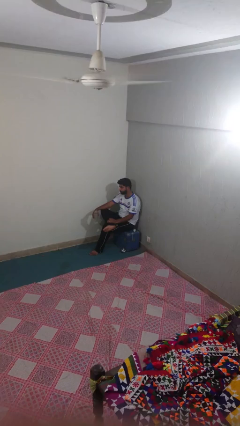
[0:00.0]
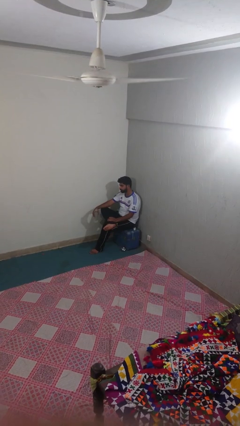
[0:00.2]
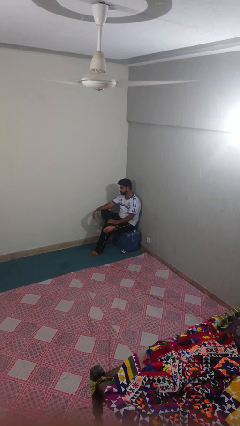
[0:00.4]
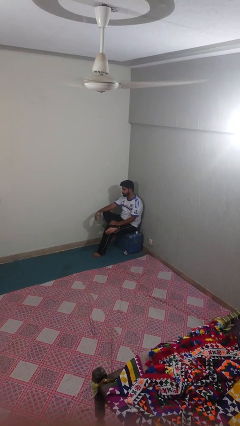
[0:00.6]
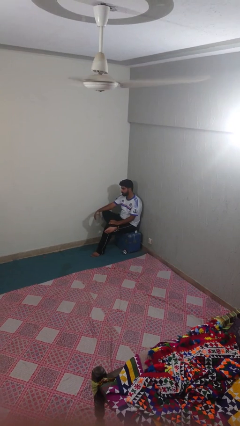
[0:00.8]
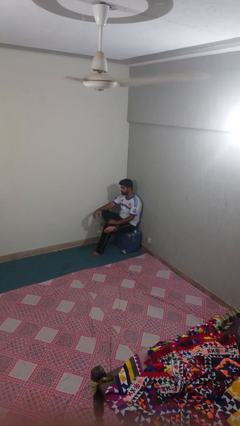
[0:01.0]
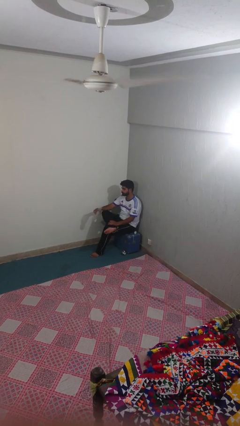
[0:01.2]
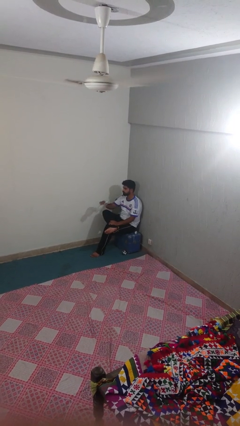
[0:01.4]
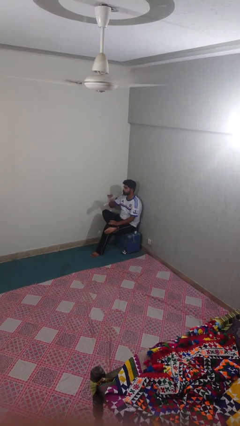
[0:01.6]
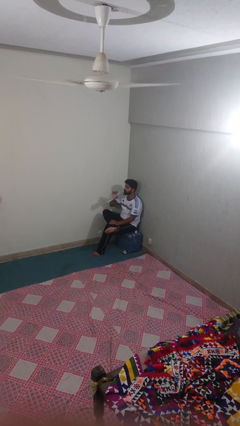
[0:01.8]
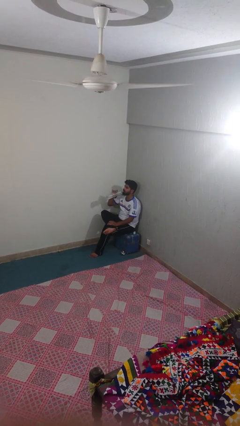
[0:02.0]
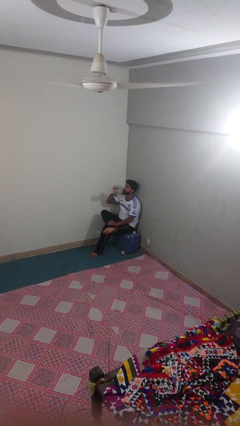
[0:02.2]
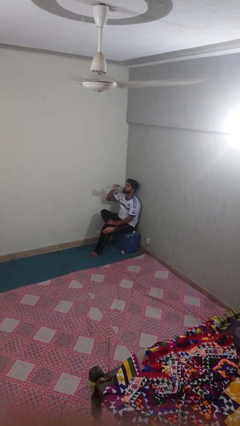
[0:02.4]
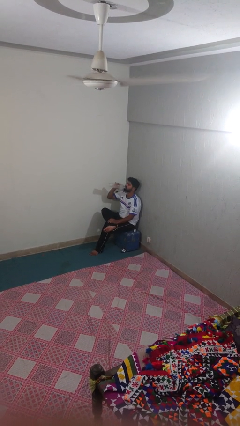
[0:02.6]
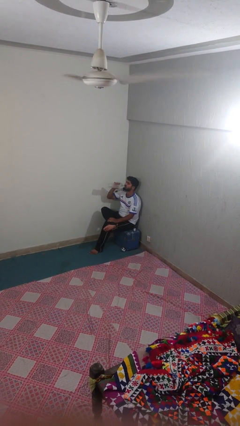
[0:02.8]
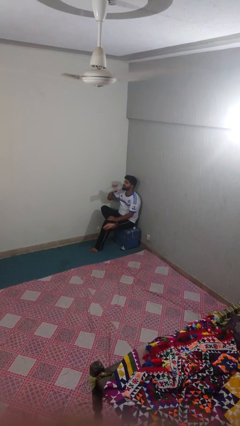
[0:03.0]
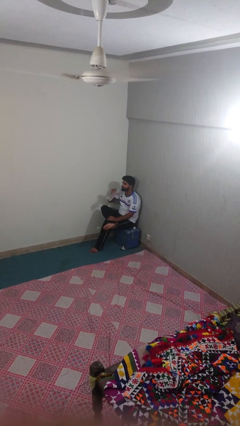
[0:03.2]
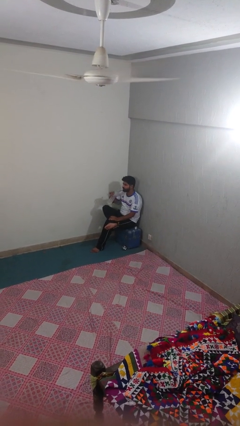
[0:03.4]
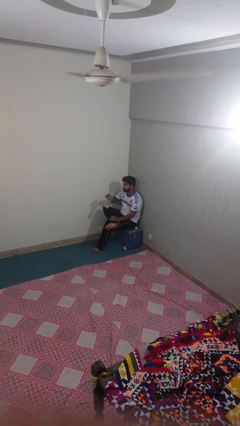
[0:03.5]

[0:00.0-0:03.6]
person drinks from bottle

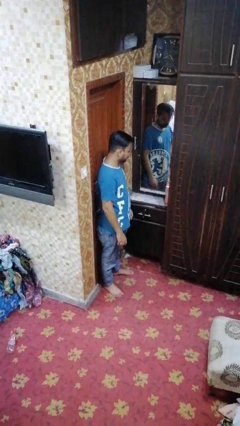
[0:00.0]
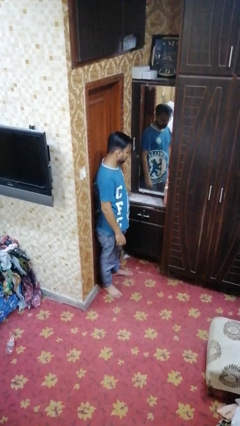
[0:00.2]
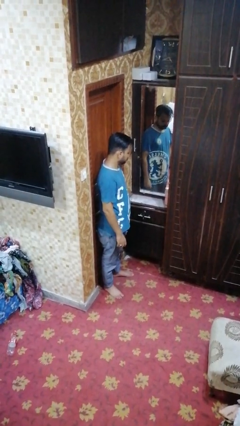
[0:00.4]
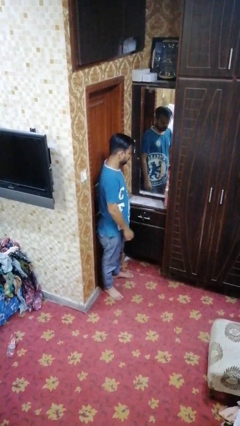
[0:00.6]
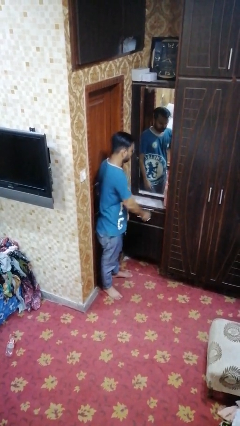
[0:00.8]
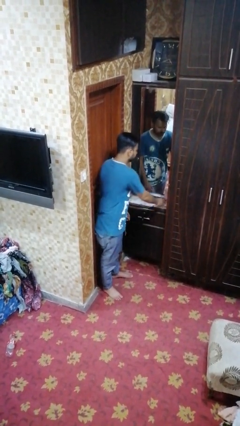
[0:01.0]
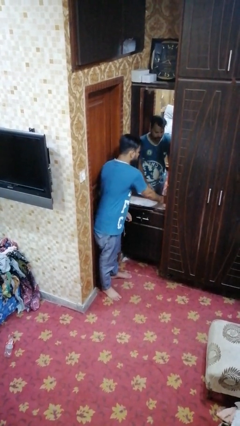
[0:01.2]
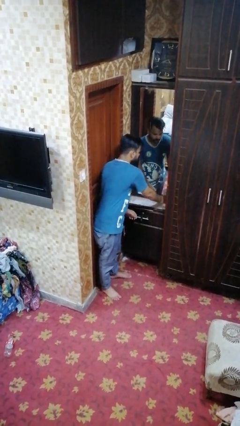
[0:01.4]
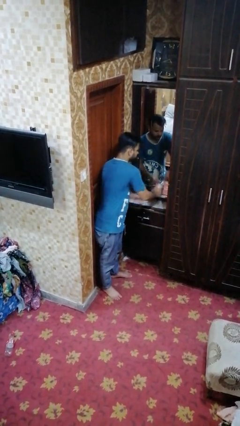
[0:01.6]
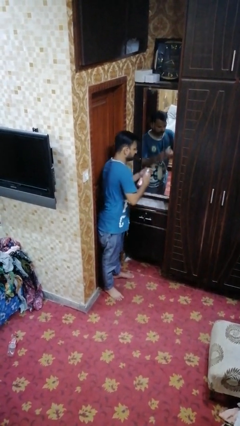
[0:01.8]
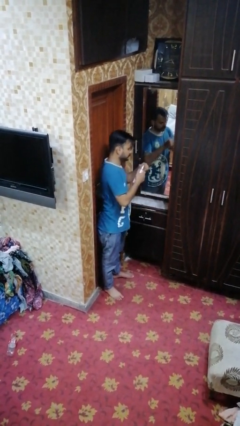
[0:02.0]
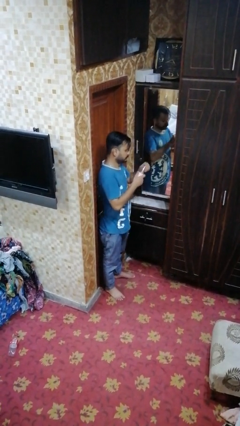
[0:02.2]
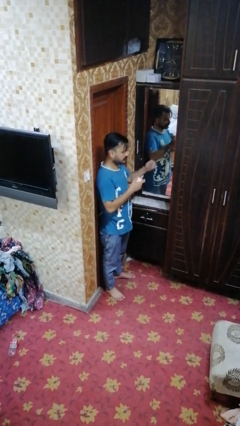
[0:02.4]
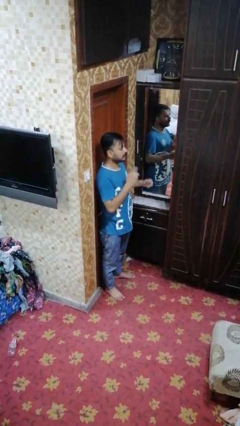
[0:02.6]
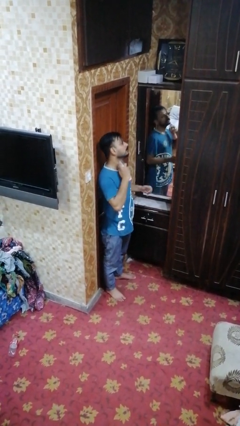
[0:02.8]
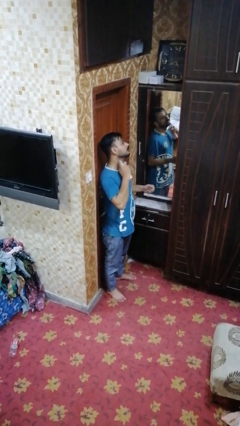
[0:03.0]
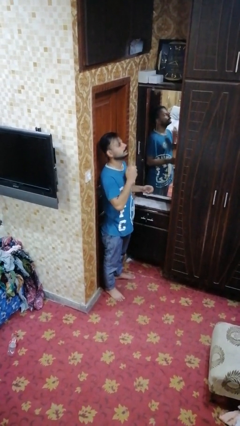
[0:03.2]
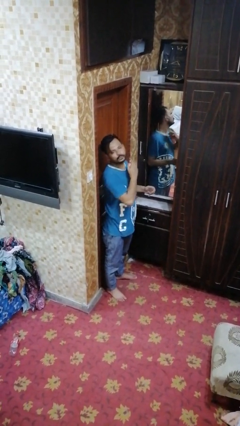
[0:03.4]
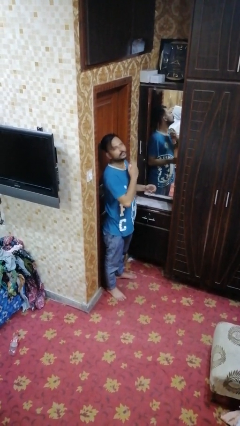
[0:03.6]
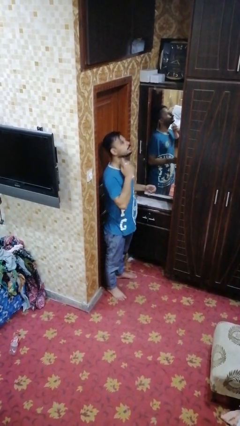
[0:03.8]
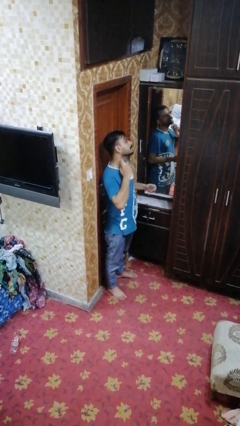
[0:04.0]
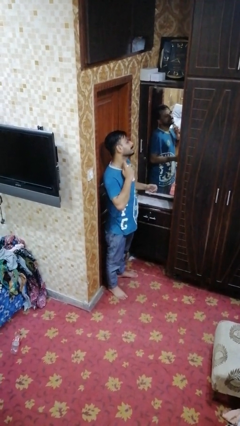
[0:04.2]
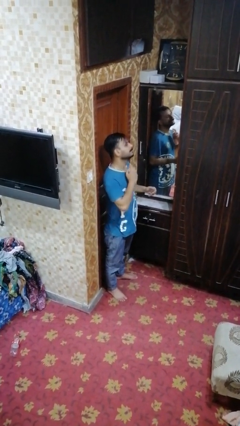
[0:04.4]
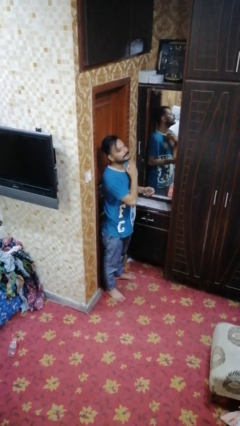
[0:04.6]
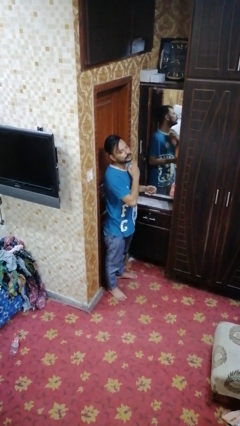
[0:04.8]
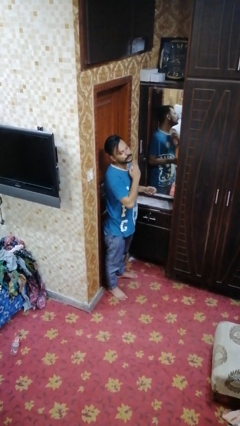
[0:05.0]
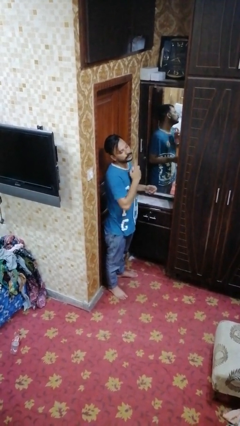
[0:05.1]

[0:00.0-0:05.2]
person sprays from bottle

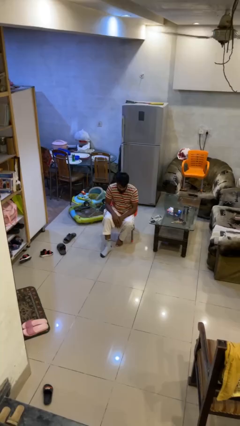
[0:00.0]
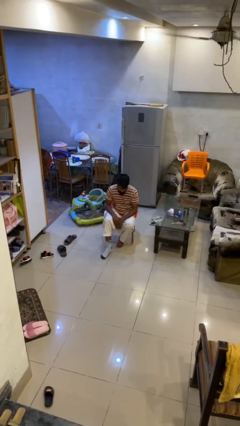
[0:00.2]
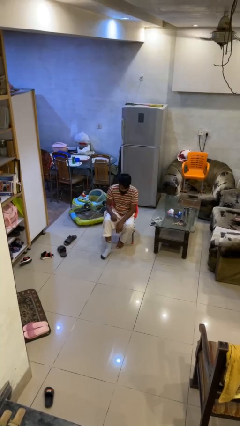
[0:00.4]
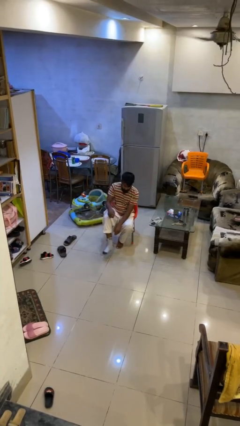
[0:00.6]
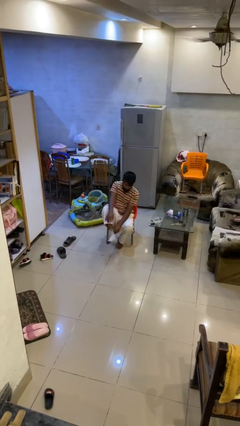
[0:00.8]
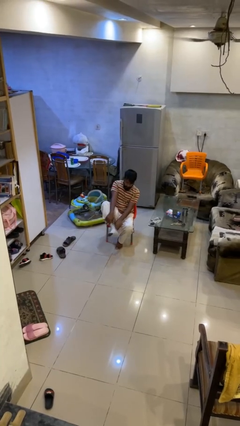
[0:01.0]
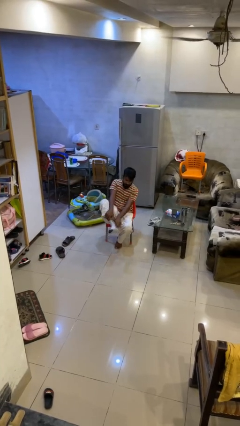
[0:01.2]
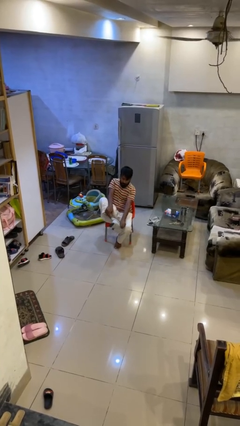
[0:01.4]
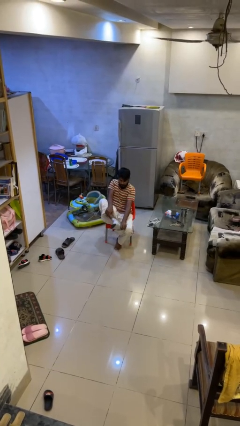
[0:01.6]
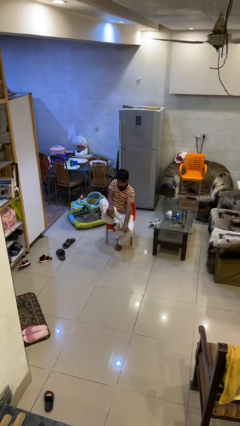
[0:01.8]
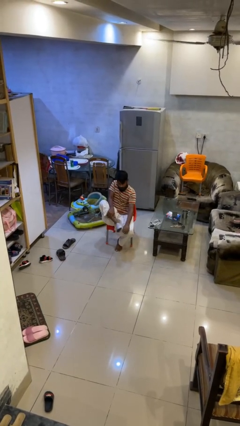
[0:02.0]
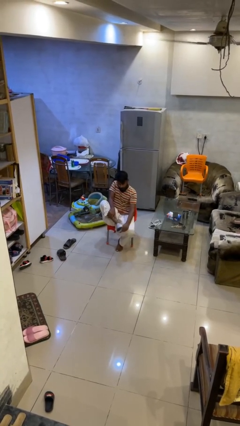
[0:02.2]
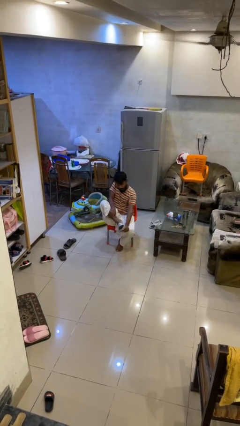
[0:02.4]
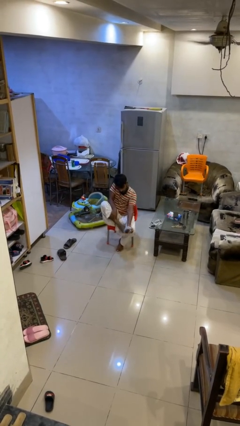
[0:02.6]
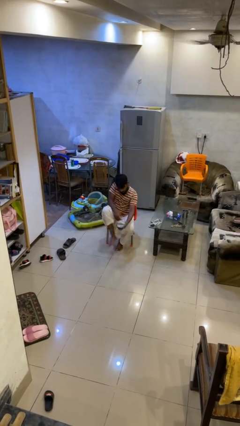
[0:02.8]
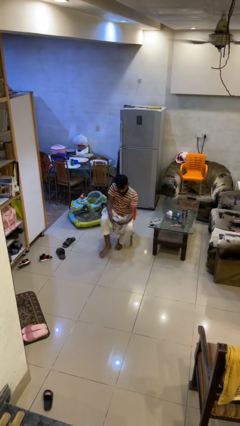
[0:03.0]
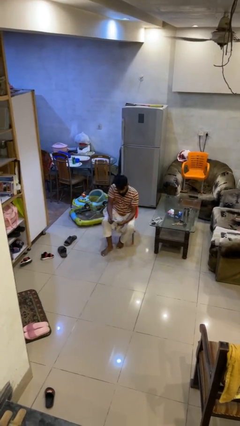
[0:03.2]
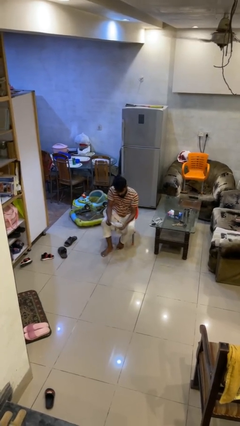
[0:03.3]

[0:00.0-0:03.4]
person takes off socks

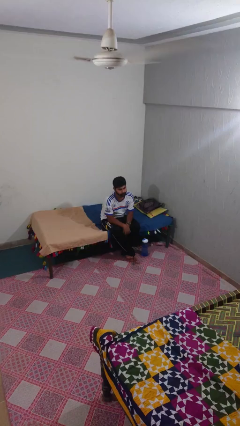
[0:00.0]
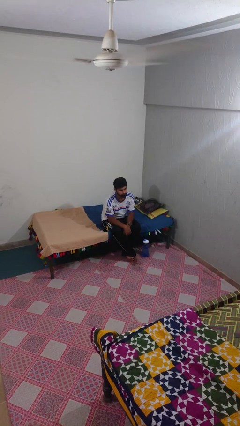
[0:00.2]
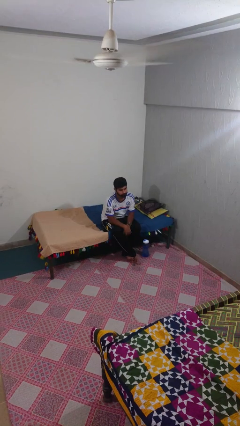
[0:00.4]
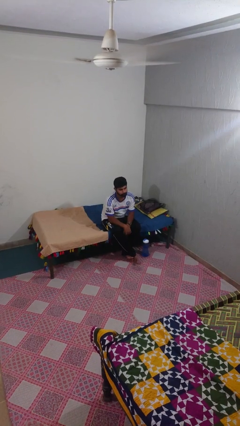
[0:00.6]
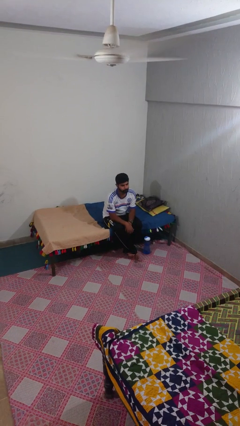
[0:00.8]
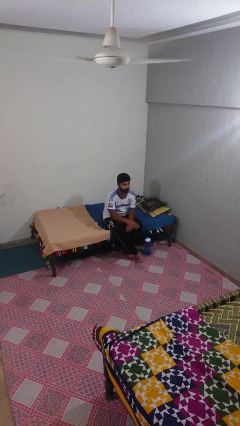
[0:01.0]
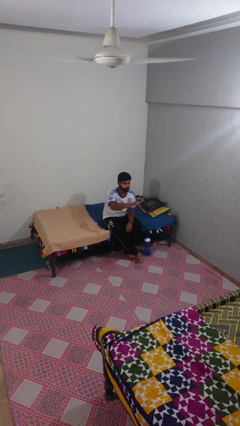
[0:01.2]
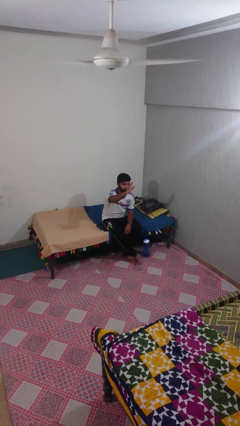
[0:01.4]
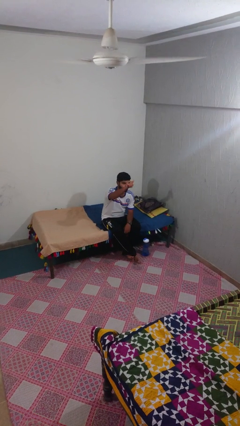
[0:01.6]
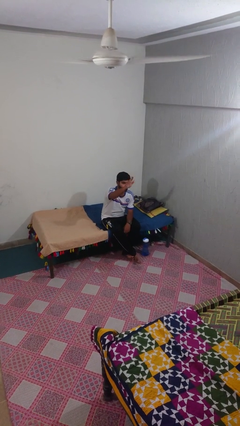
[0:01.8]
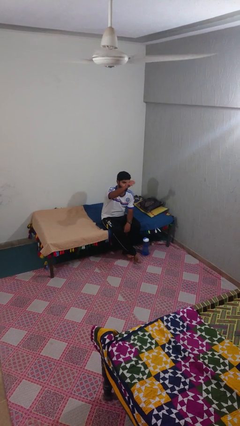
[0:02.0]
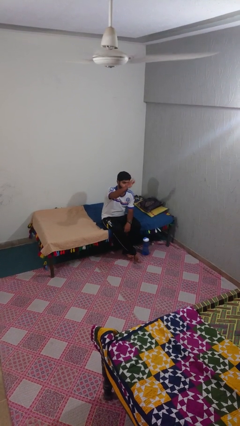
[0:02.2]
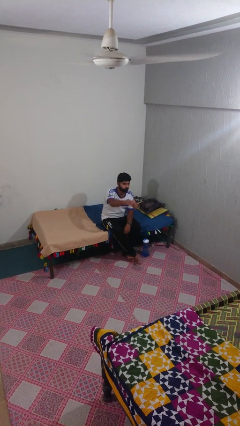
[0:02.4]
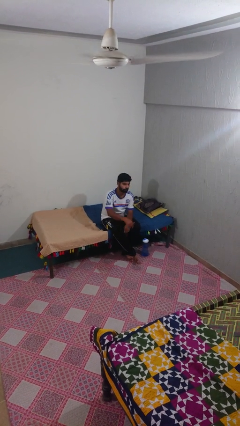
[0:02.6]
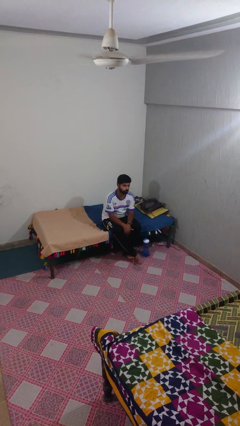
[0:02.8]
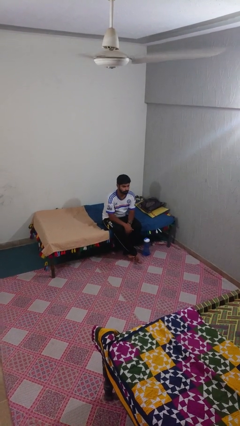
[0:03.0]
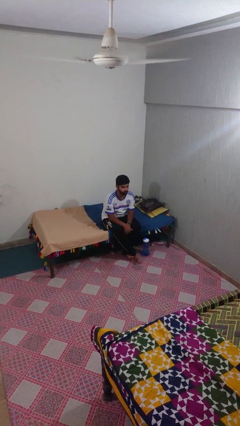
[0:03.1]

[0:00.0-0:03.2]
person gestures come here

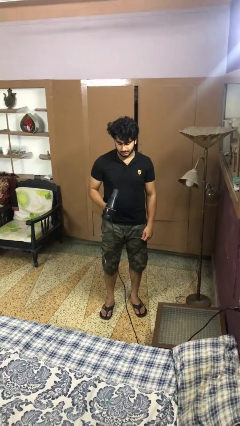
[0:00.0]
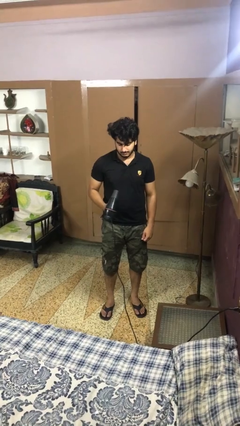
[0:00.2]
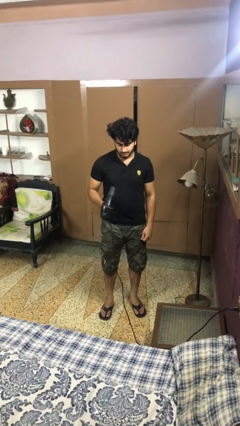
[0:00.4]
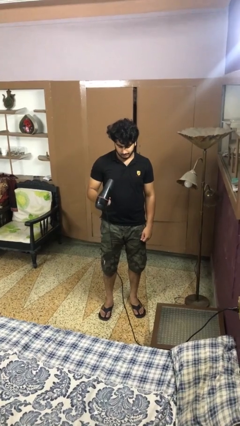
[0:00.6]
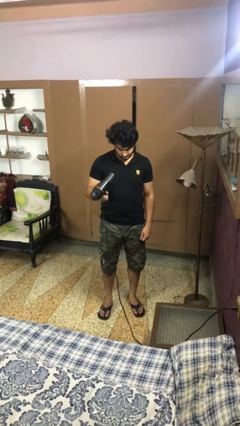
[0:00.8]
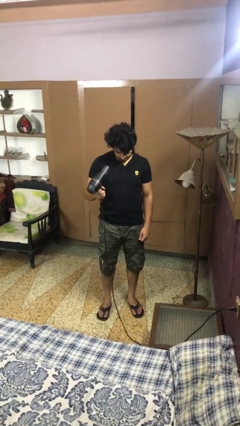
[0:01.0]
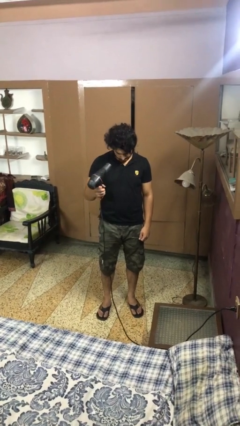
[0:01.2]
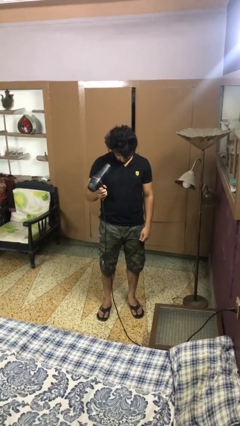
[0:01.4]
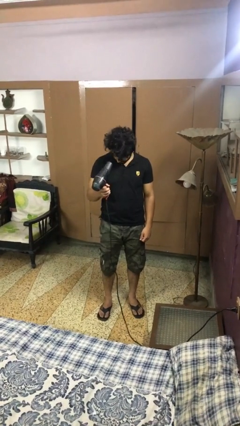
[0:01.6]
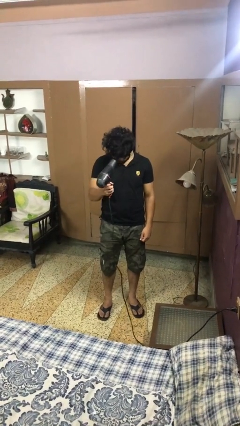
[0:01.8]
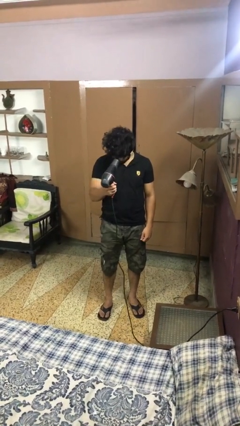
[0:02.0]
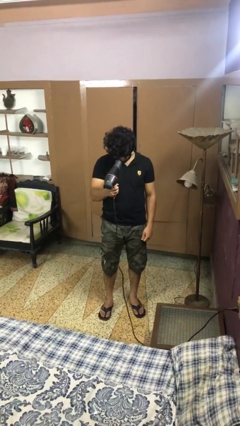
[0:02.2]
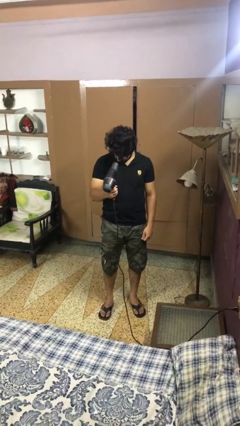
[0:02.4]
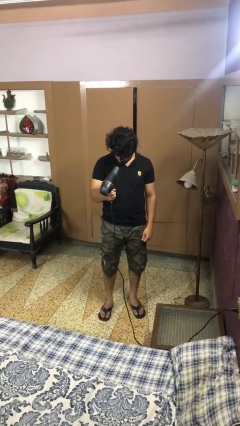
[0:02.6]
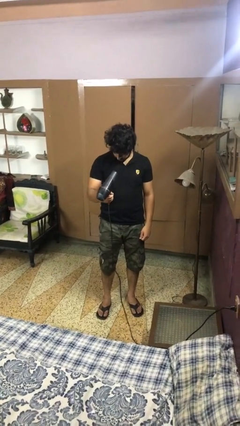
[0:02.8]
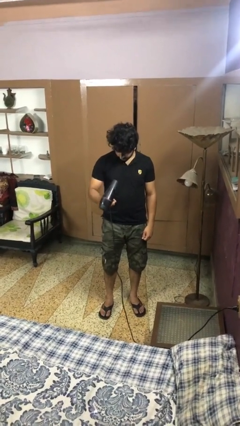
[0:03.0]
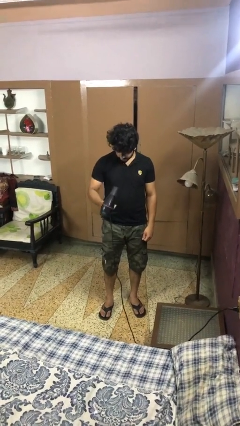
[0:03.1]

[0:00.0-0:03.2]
person dries hair with hairdryer
